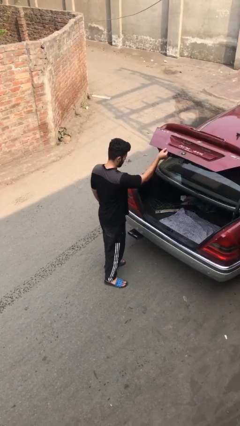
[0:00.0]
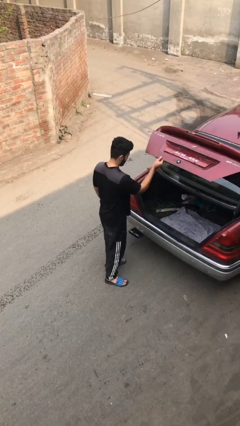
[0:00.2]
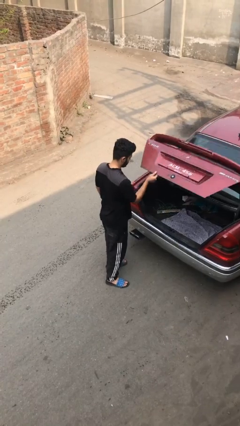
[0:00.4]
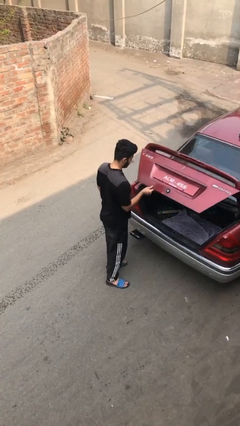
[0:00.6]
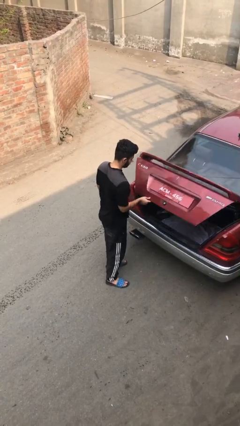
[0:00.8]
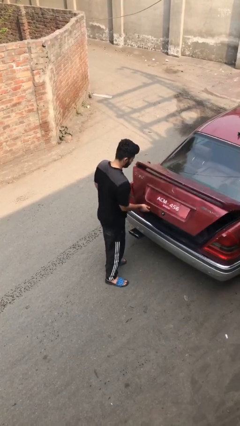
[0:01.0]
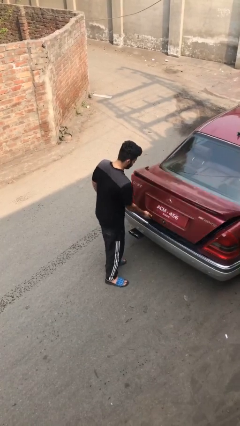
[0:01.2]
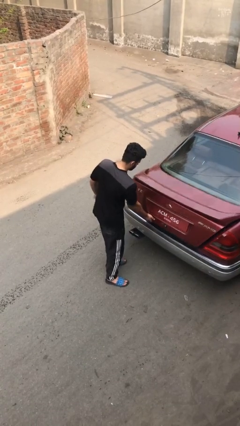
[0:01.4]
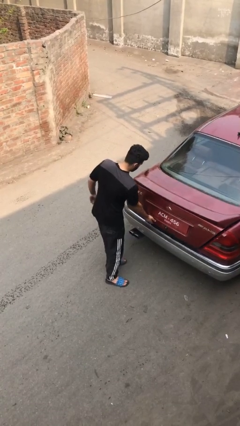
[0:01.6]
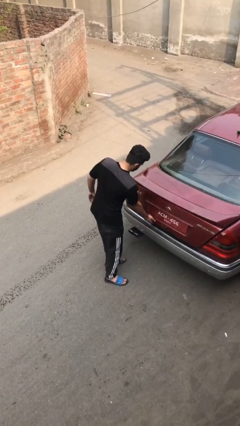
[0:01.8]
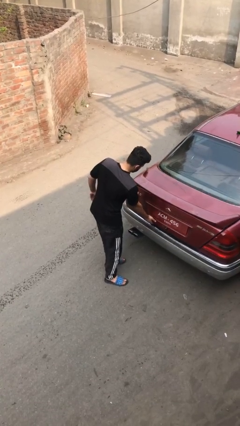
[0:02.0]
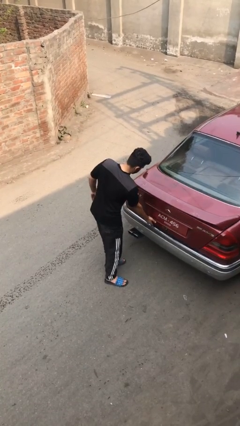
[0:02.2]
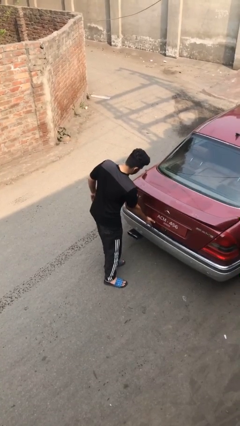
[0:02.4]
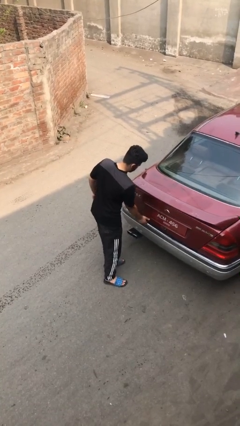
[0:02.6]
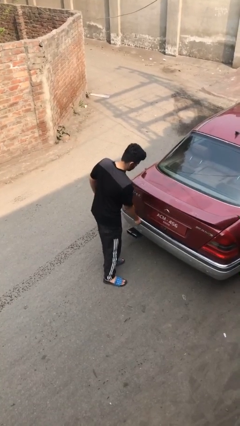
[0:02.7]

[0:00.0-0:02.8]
person closes car trunk

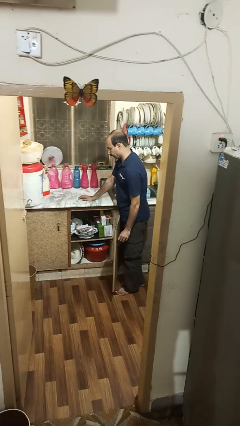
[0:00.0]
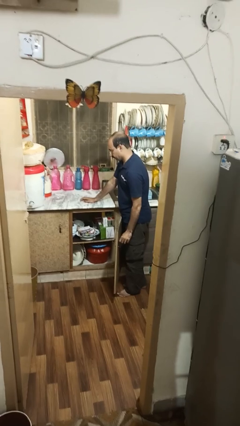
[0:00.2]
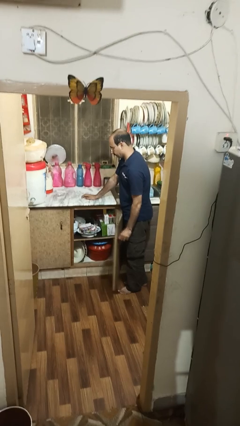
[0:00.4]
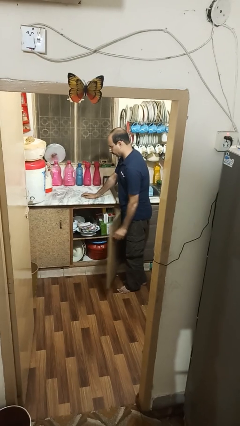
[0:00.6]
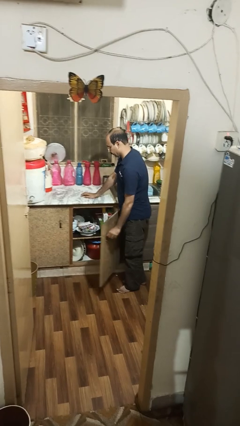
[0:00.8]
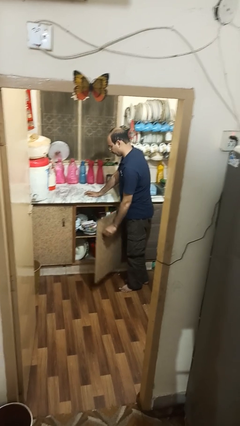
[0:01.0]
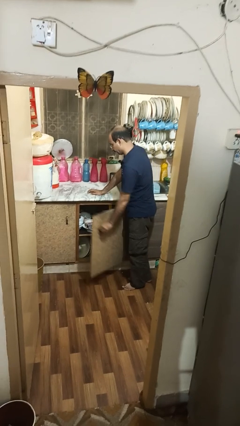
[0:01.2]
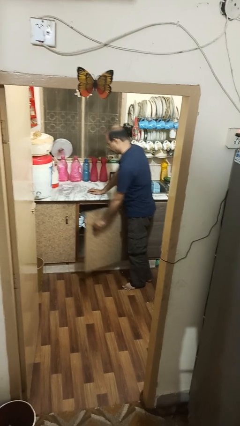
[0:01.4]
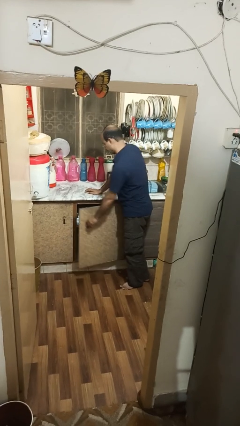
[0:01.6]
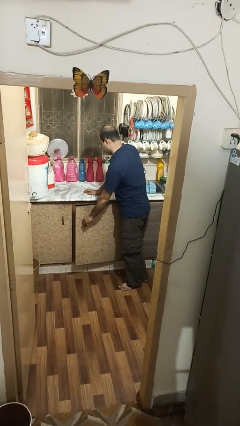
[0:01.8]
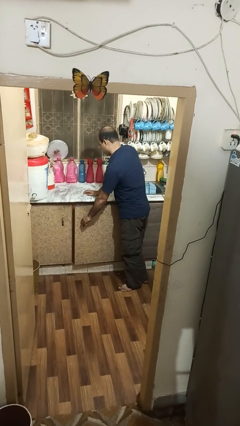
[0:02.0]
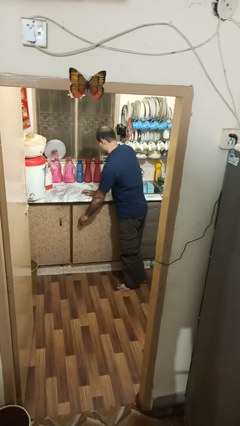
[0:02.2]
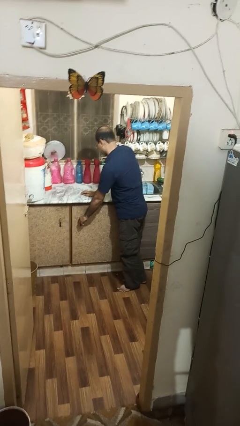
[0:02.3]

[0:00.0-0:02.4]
person closes cabinet

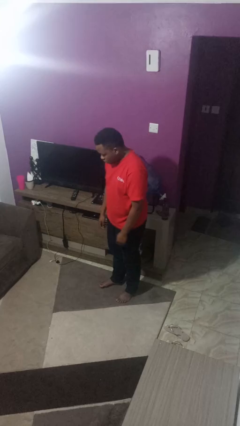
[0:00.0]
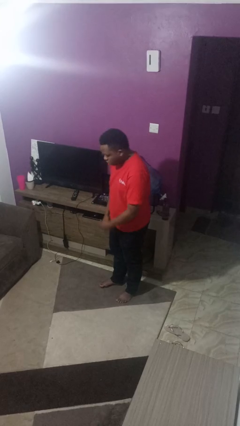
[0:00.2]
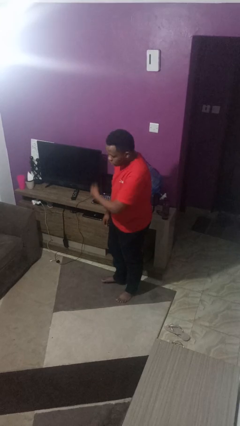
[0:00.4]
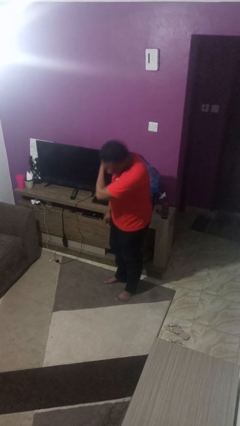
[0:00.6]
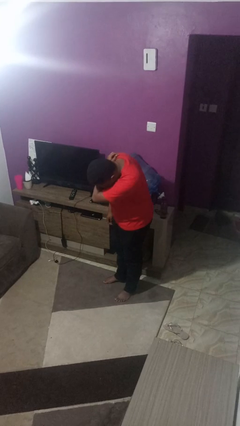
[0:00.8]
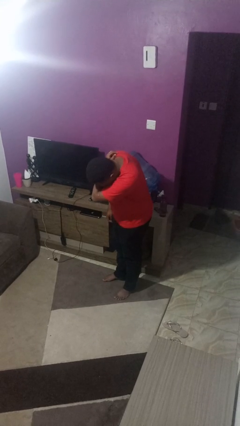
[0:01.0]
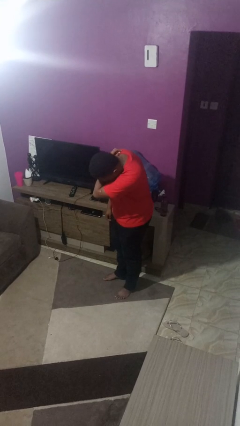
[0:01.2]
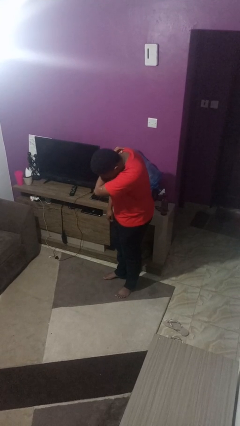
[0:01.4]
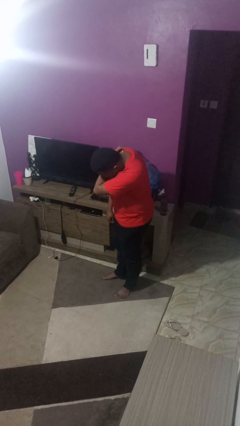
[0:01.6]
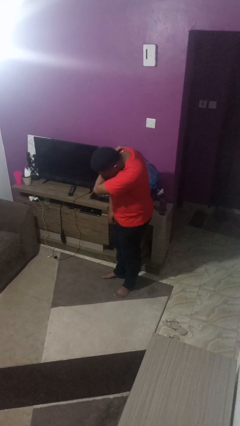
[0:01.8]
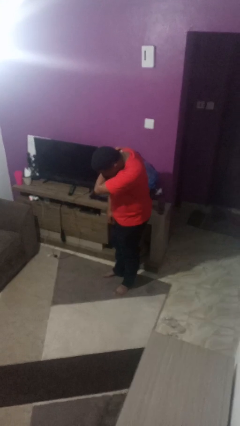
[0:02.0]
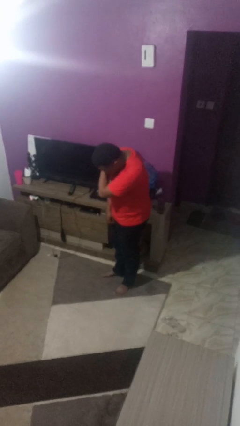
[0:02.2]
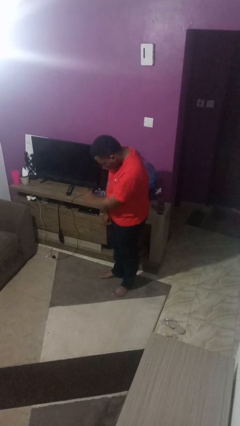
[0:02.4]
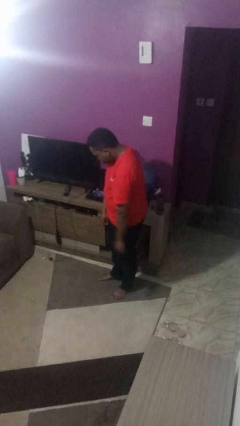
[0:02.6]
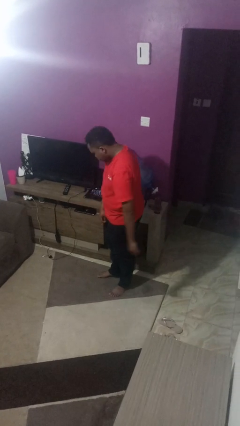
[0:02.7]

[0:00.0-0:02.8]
person sneezes into arm

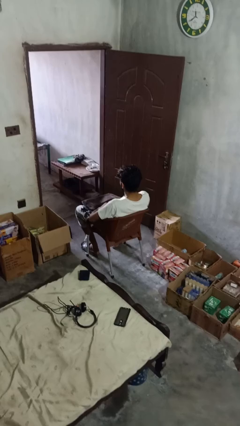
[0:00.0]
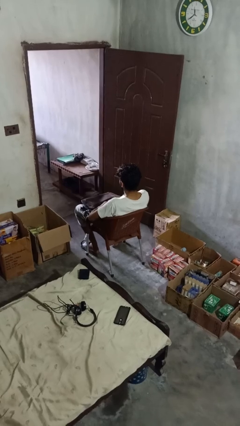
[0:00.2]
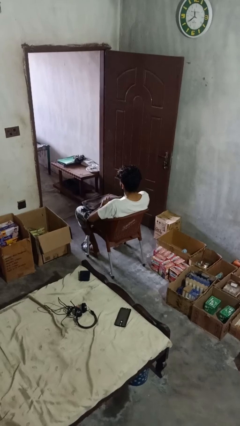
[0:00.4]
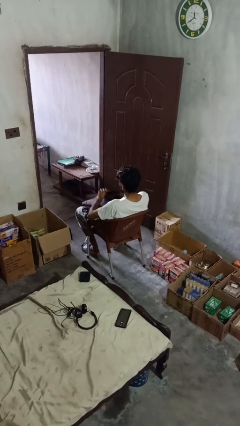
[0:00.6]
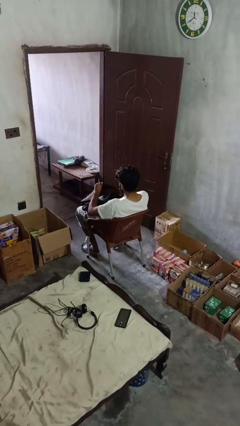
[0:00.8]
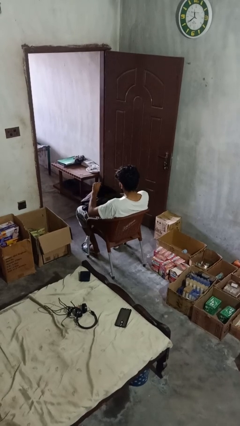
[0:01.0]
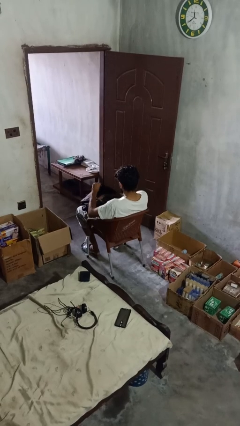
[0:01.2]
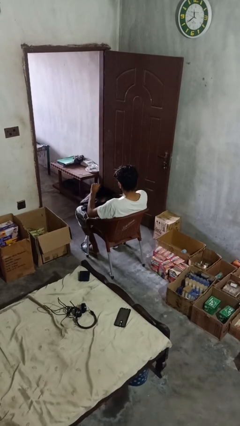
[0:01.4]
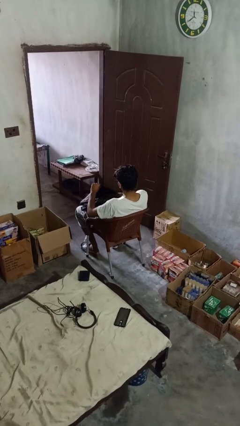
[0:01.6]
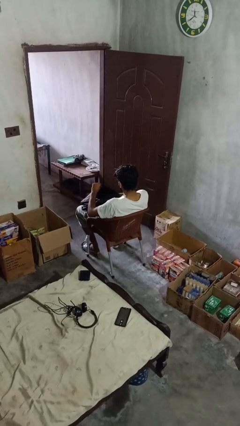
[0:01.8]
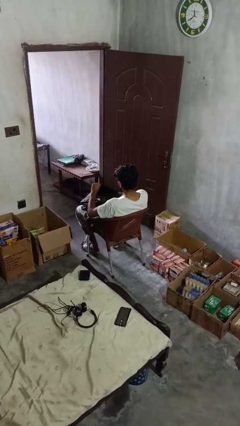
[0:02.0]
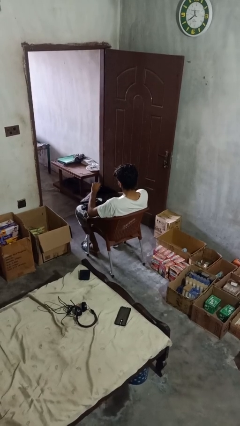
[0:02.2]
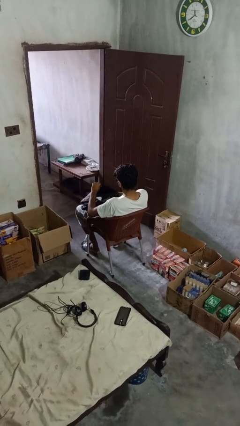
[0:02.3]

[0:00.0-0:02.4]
person searches in backpack

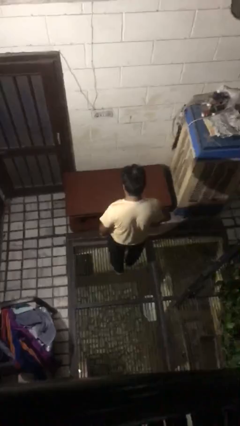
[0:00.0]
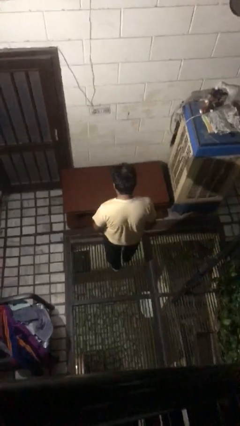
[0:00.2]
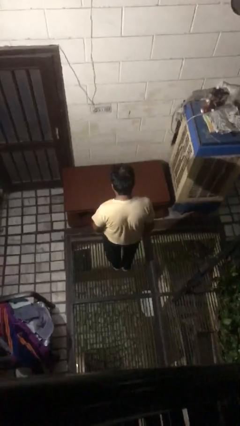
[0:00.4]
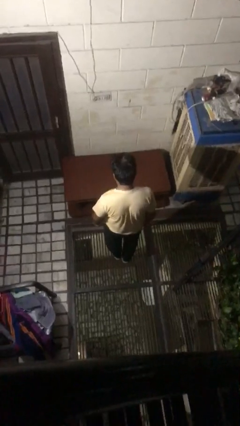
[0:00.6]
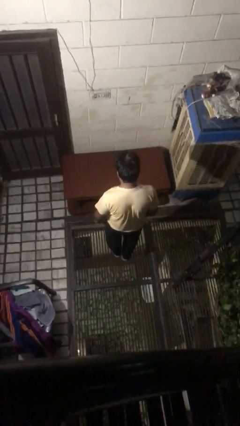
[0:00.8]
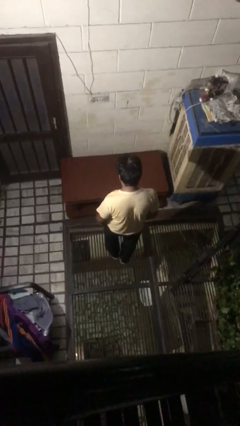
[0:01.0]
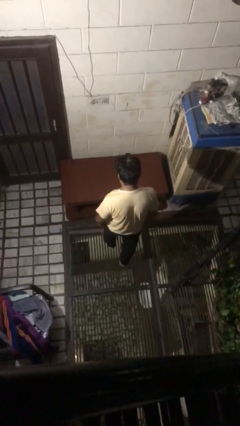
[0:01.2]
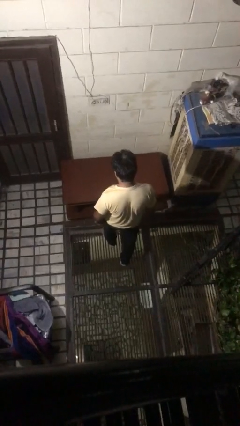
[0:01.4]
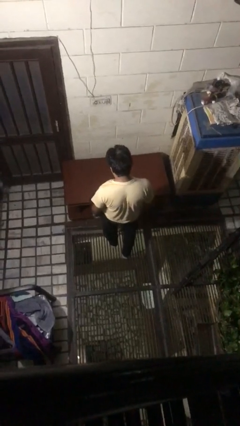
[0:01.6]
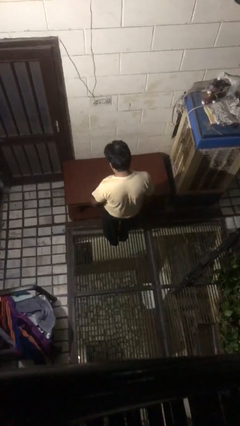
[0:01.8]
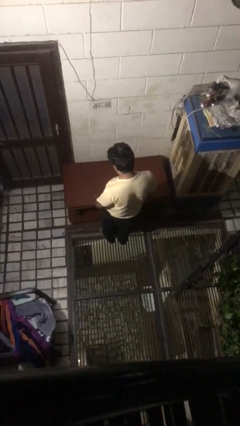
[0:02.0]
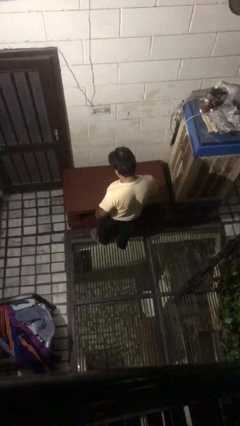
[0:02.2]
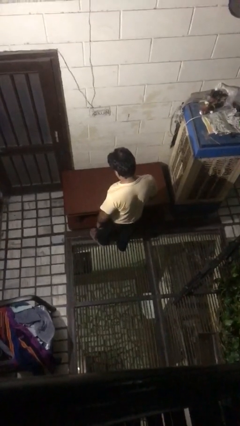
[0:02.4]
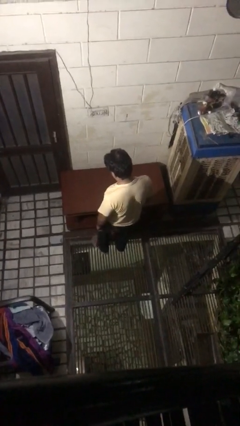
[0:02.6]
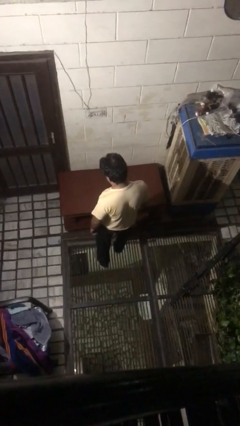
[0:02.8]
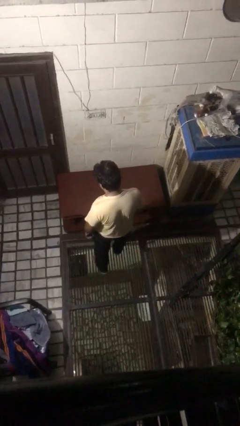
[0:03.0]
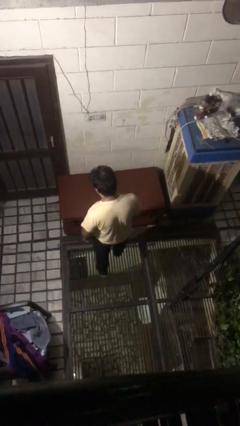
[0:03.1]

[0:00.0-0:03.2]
person bumps into table

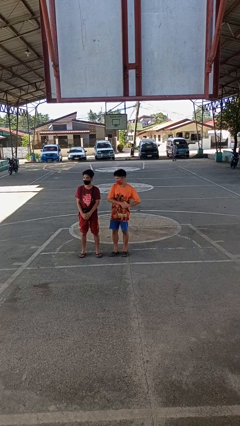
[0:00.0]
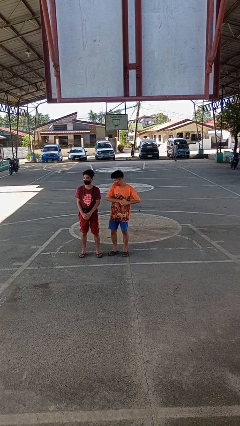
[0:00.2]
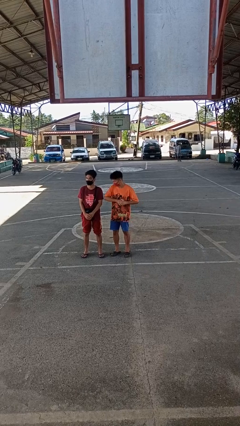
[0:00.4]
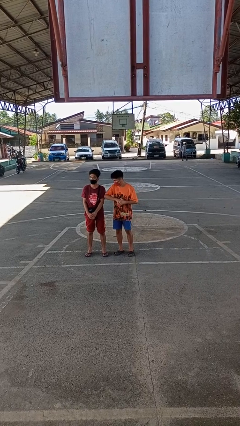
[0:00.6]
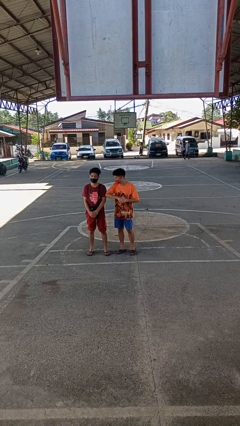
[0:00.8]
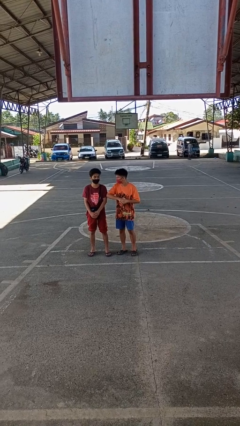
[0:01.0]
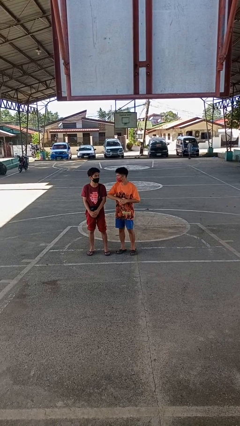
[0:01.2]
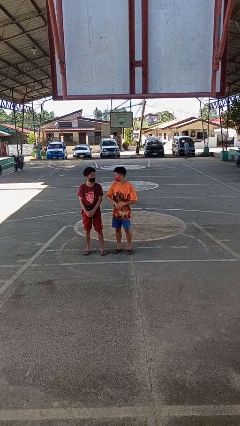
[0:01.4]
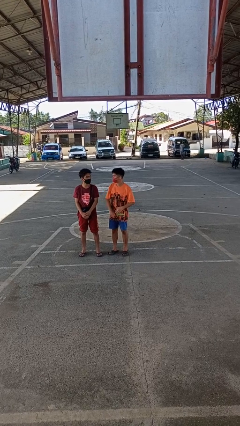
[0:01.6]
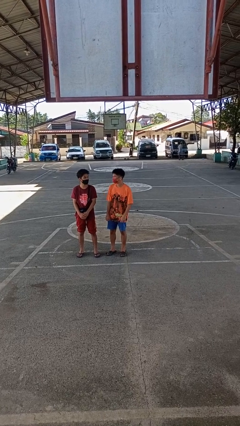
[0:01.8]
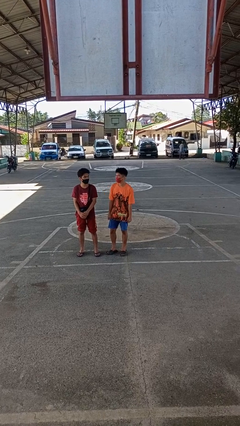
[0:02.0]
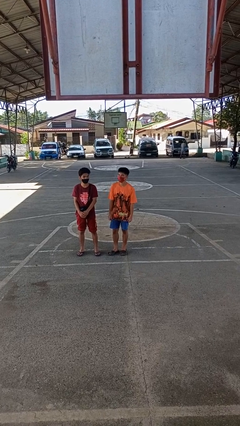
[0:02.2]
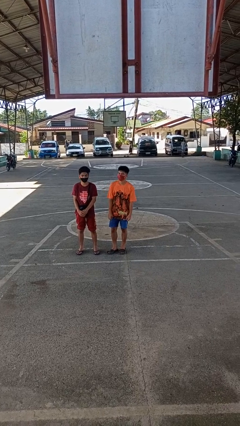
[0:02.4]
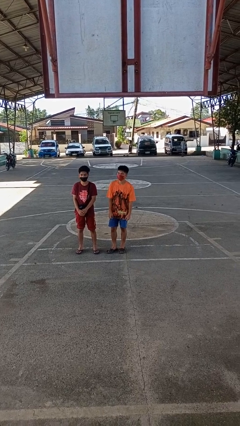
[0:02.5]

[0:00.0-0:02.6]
person nudges person with elbow

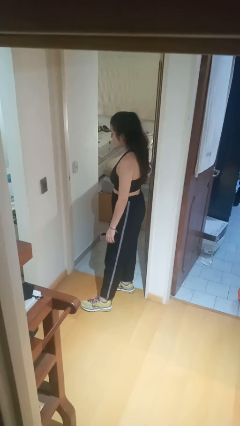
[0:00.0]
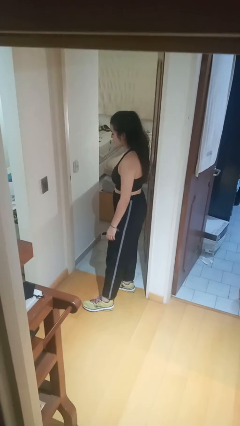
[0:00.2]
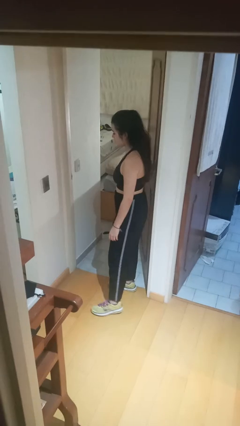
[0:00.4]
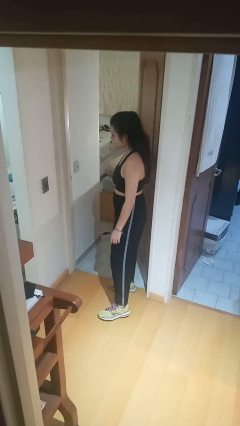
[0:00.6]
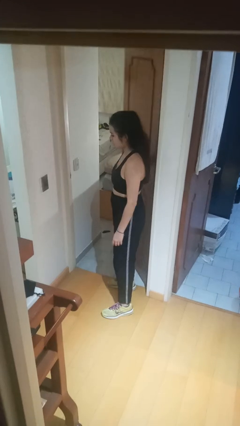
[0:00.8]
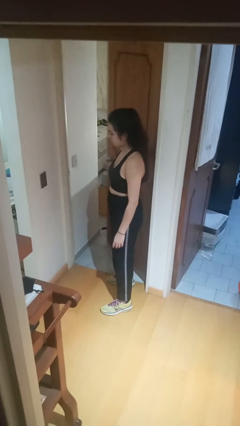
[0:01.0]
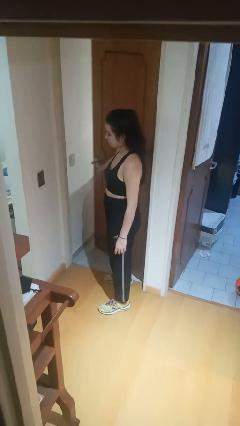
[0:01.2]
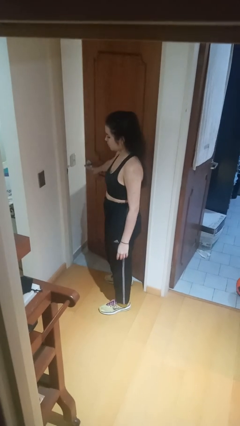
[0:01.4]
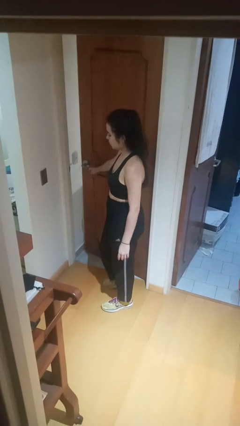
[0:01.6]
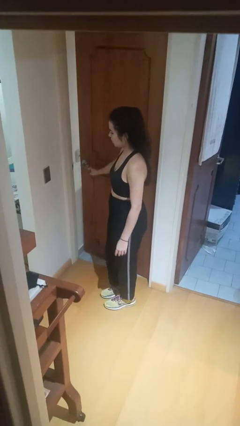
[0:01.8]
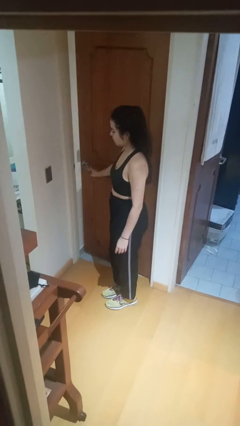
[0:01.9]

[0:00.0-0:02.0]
person closes facility door
